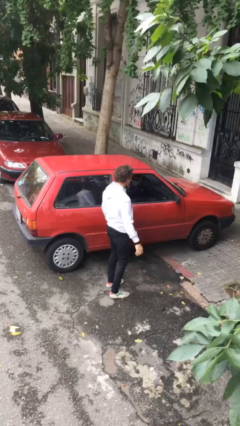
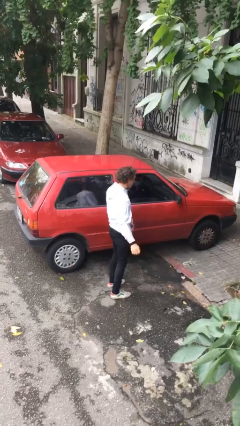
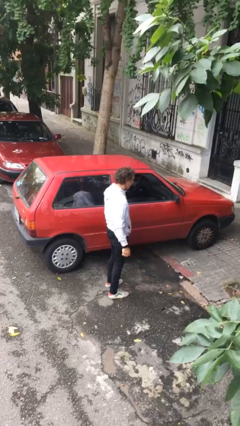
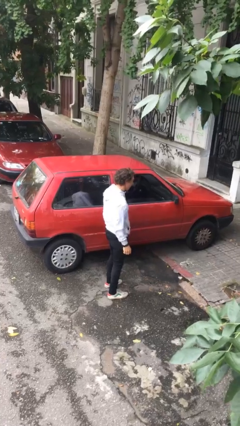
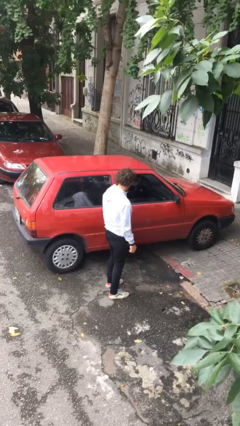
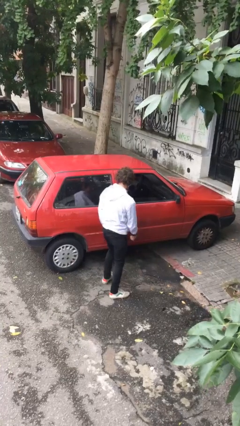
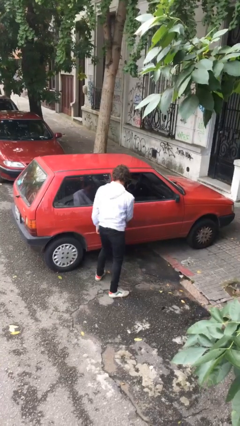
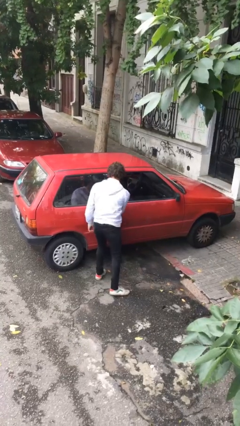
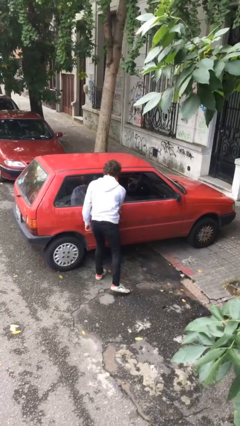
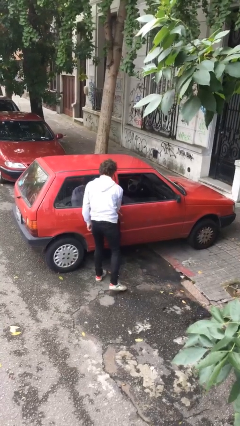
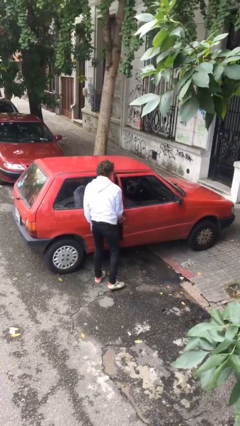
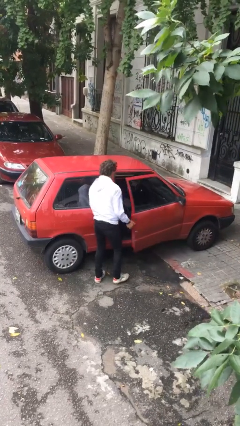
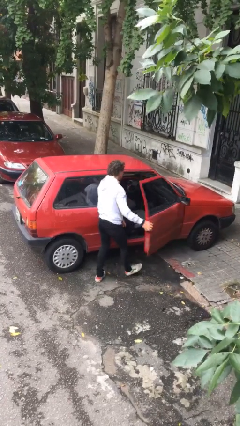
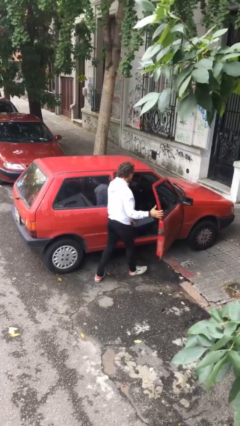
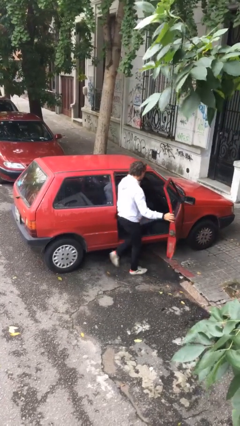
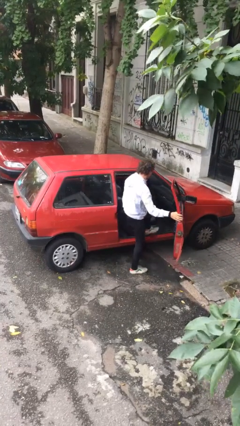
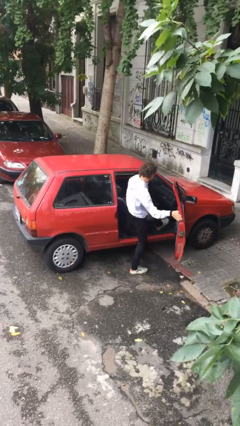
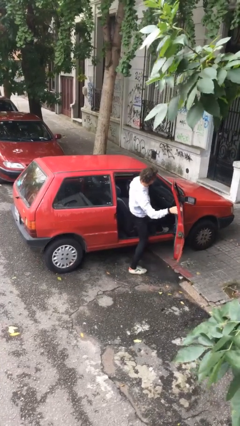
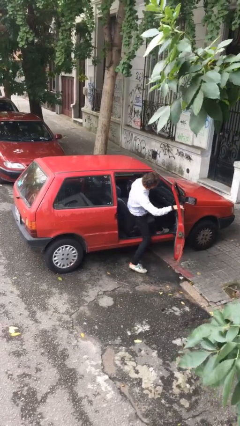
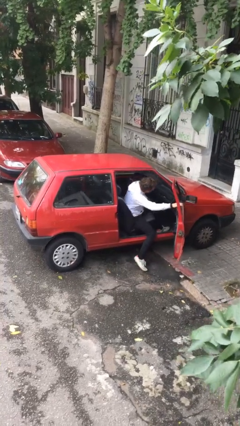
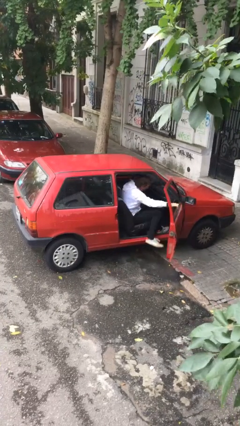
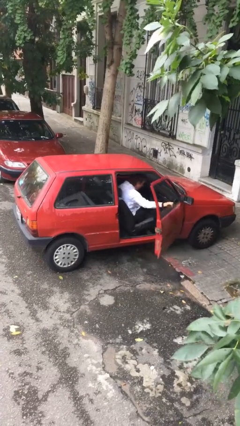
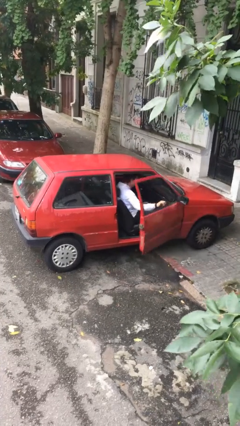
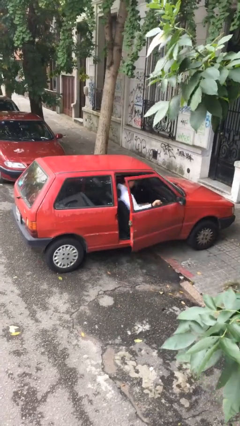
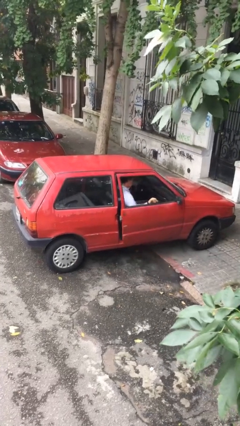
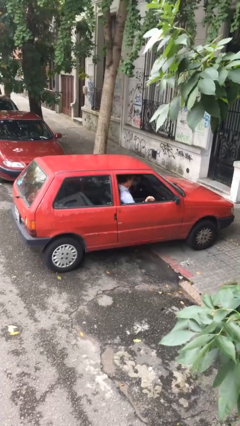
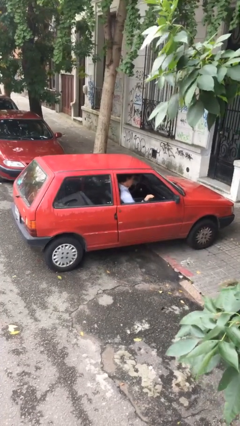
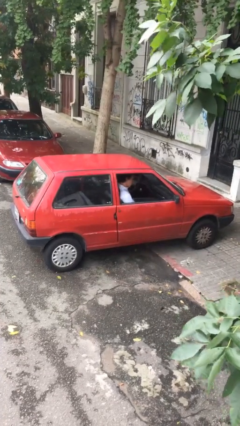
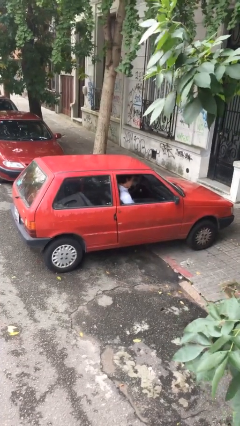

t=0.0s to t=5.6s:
car picks up person

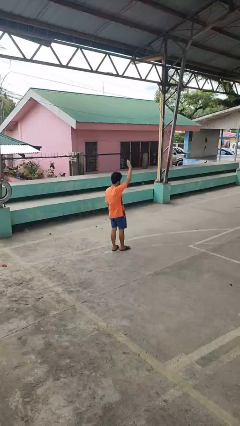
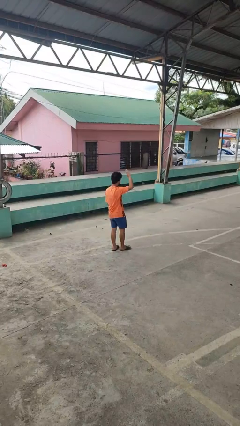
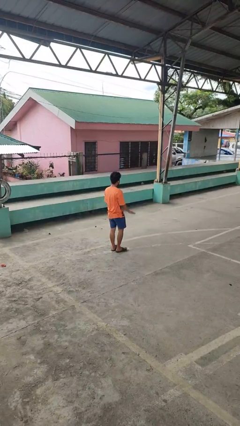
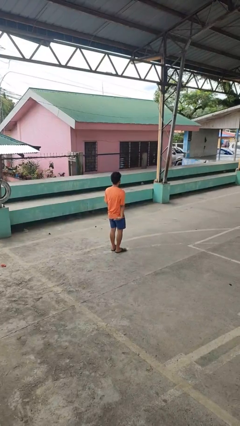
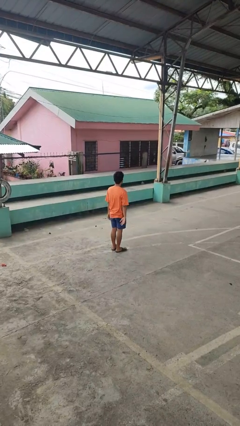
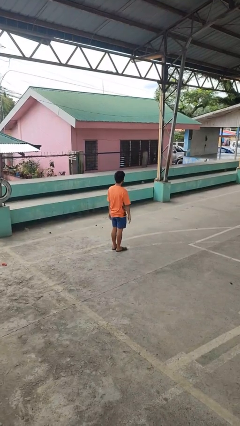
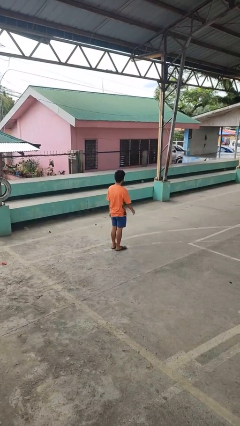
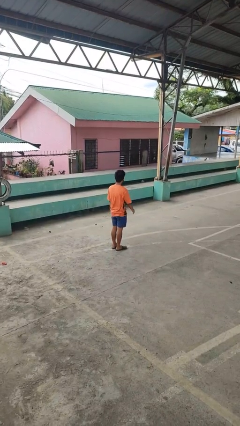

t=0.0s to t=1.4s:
person gestures lower hand

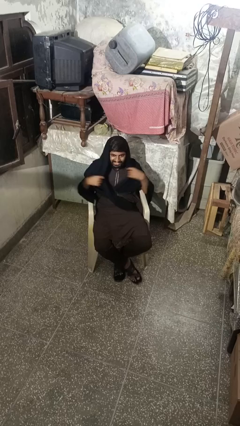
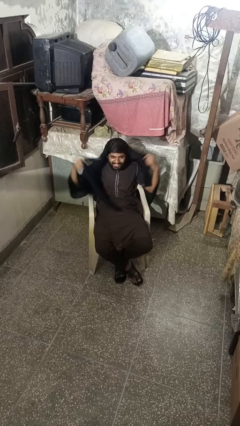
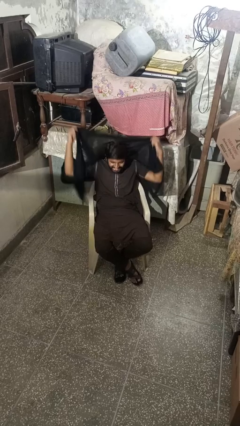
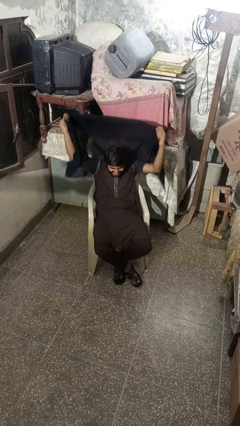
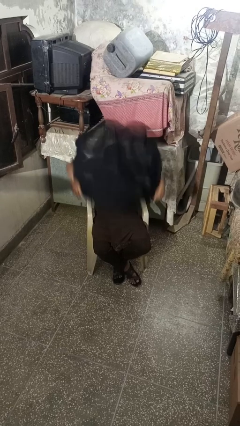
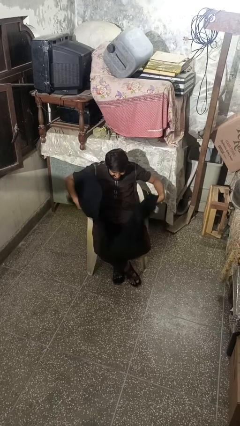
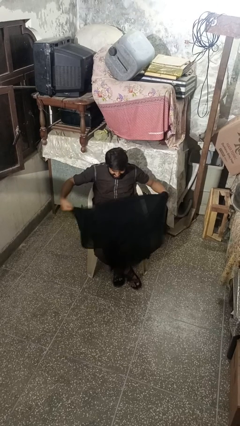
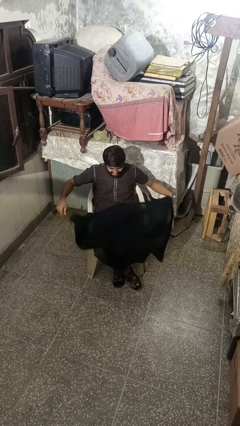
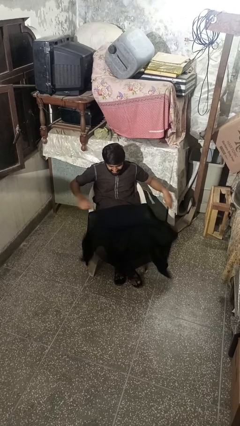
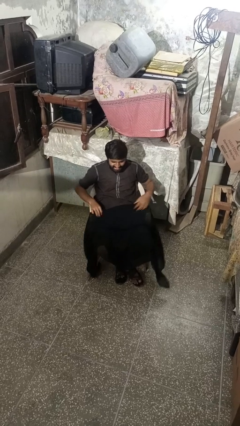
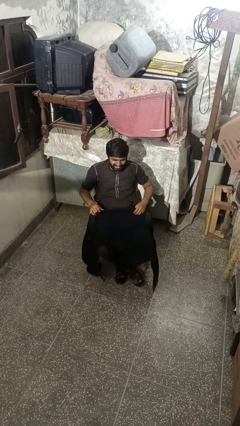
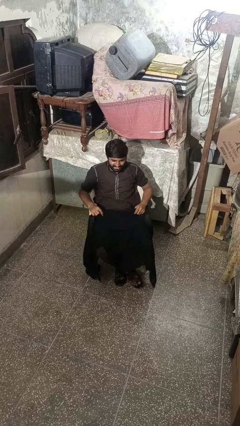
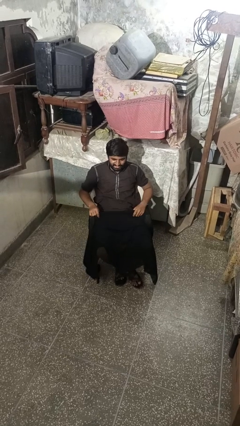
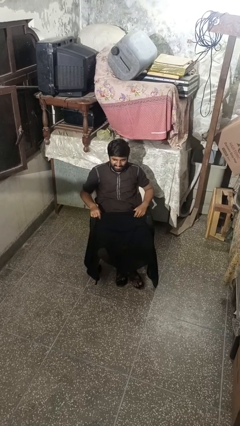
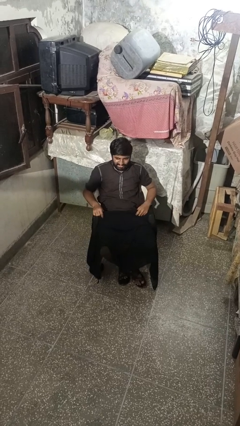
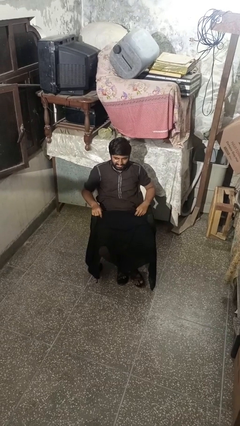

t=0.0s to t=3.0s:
person takes off scarf

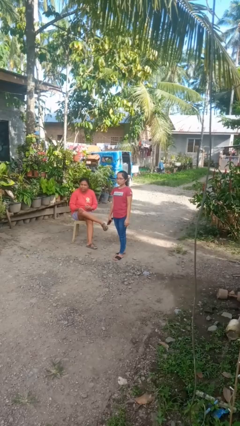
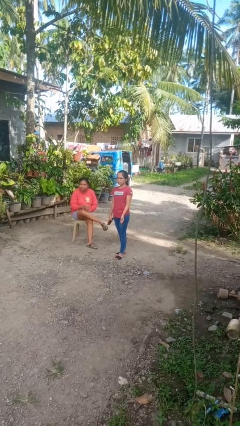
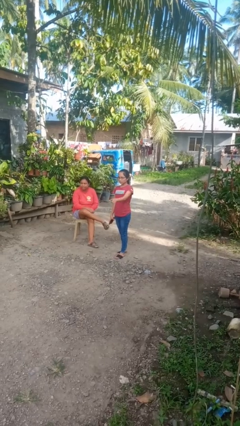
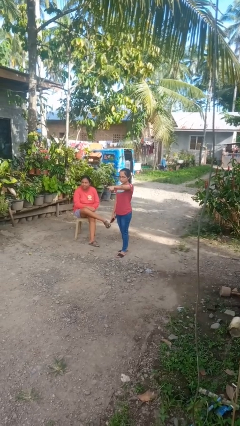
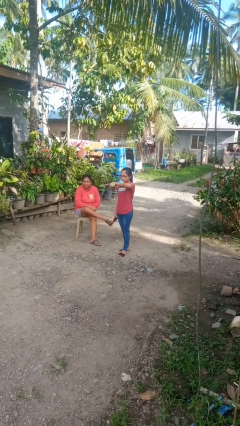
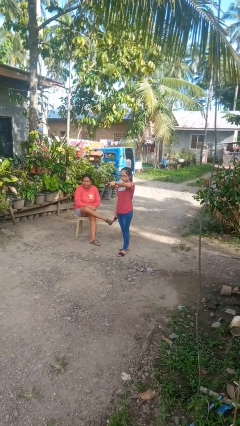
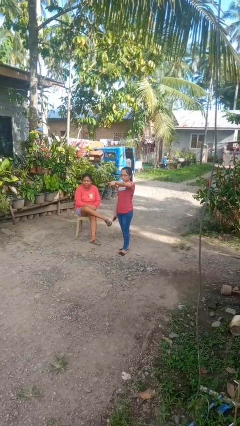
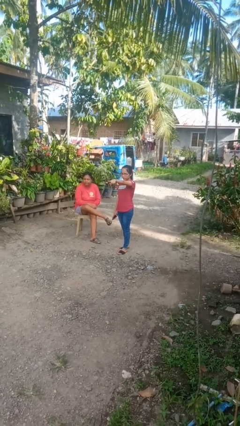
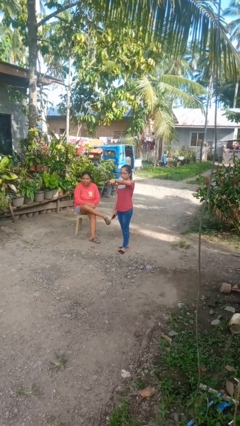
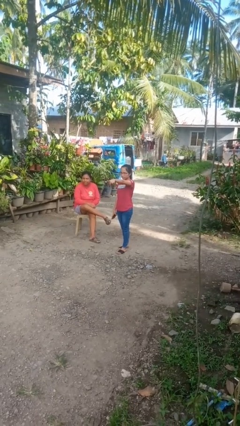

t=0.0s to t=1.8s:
person points at person
